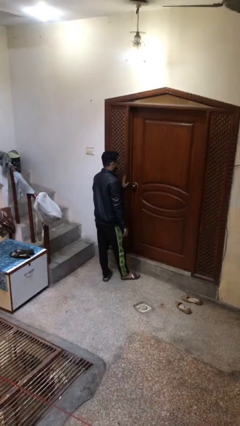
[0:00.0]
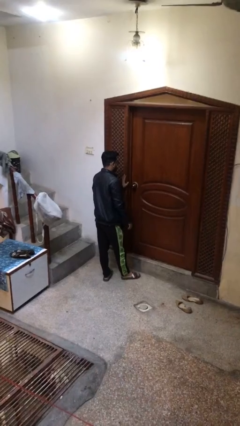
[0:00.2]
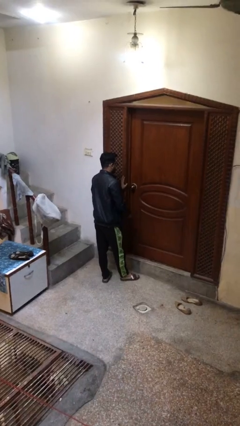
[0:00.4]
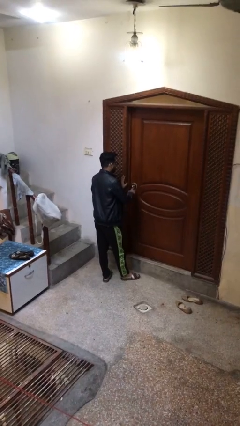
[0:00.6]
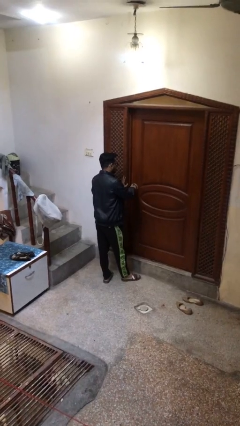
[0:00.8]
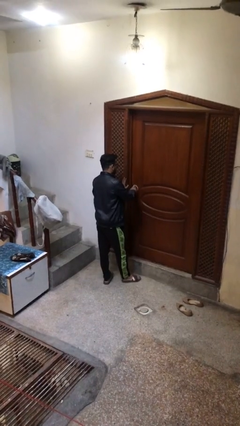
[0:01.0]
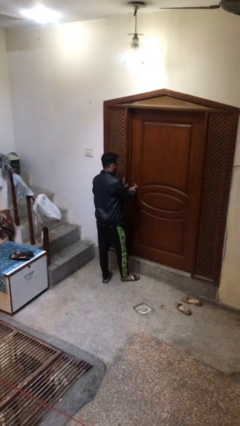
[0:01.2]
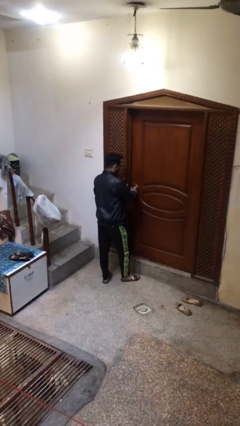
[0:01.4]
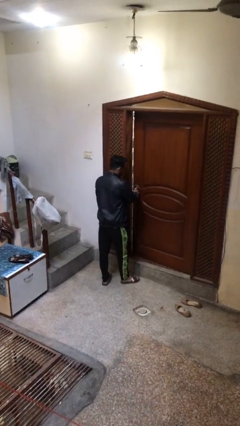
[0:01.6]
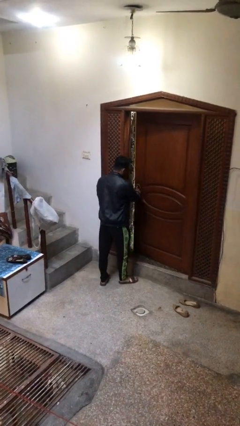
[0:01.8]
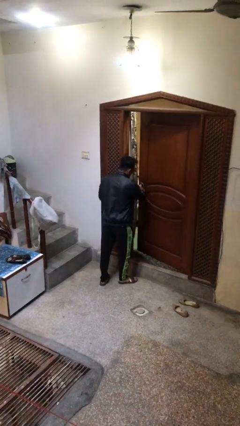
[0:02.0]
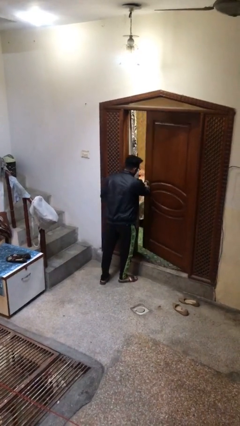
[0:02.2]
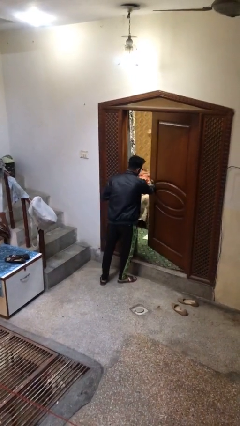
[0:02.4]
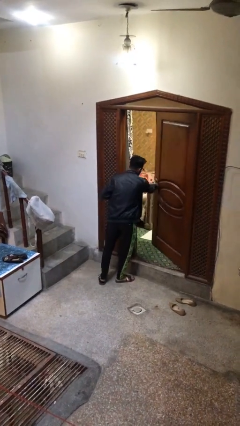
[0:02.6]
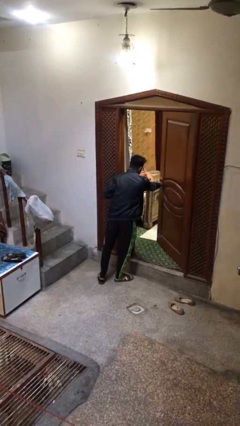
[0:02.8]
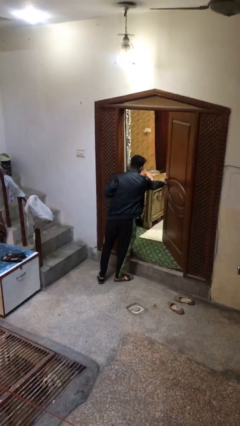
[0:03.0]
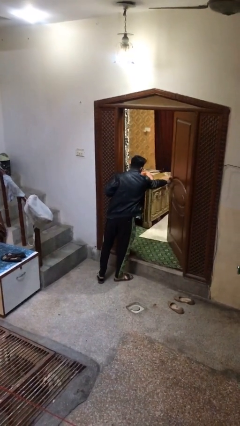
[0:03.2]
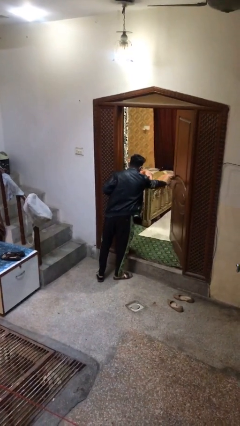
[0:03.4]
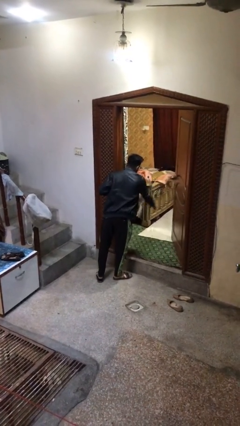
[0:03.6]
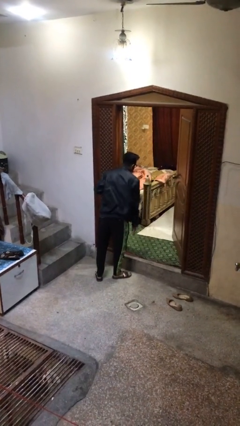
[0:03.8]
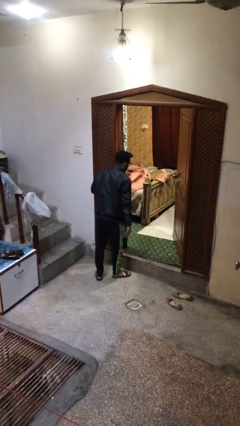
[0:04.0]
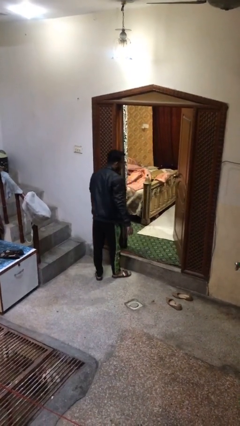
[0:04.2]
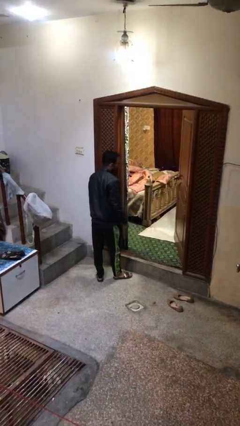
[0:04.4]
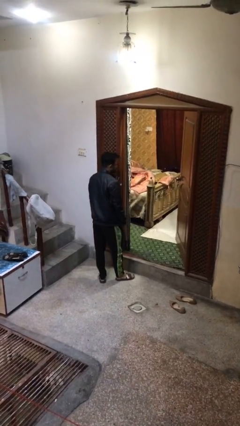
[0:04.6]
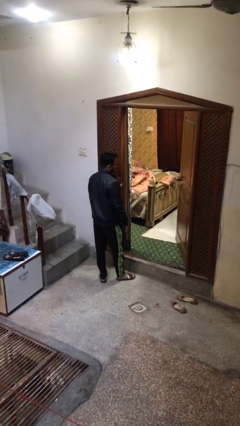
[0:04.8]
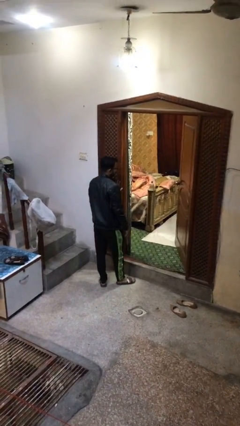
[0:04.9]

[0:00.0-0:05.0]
person opens facility door

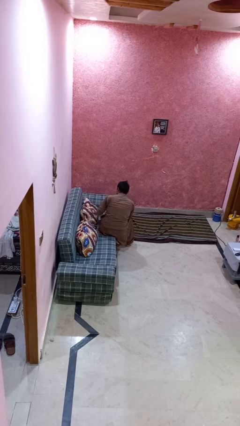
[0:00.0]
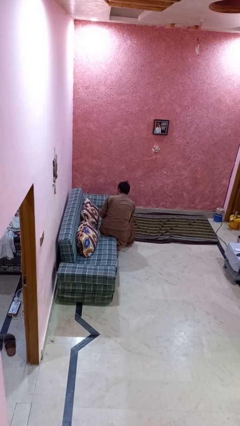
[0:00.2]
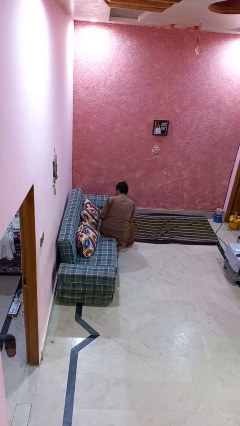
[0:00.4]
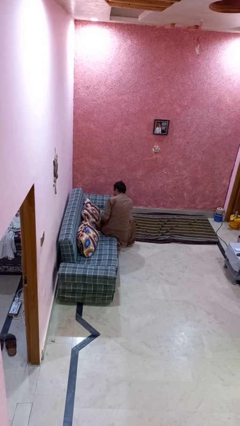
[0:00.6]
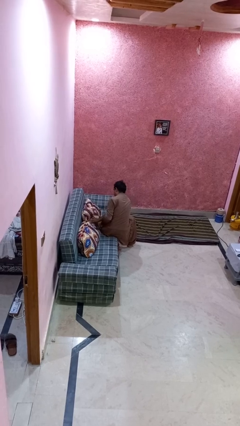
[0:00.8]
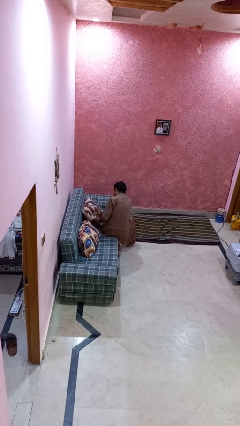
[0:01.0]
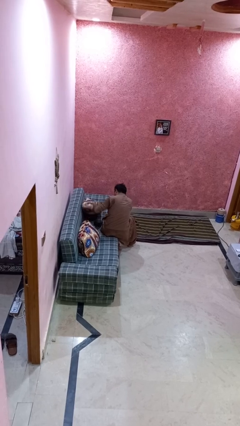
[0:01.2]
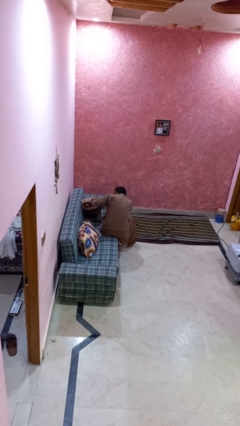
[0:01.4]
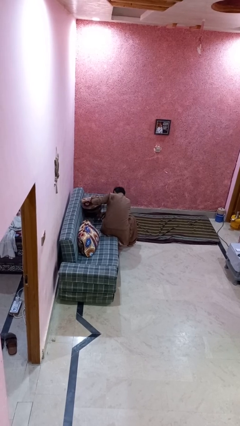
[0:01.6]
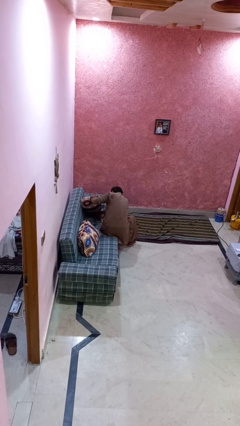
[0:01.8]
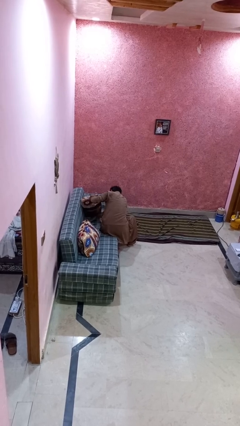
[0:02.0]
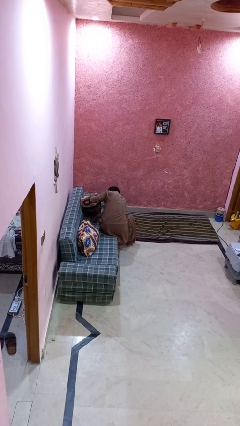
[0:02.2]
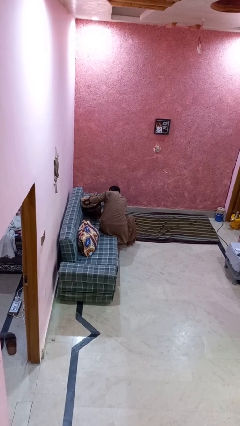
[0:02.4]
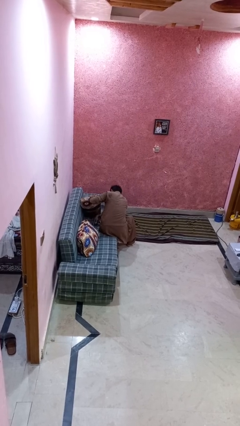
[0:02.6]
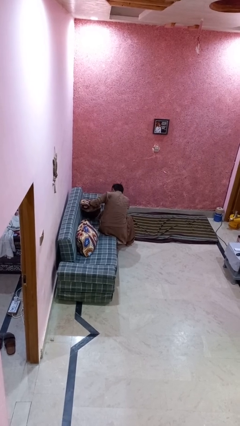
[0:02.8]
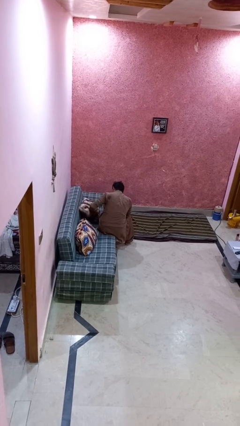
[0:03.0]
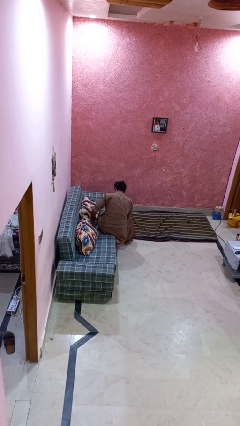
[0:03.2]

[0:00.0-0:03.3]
person searches in couch

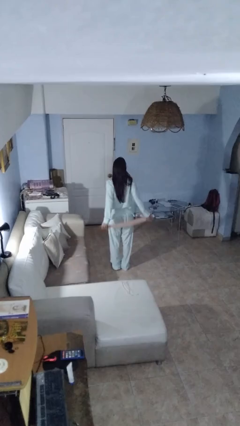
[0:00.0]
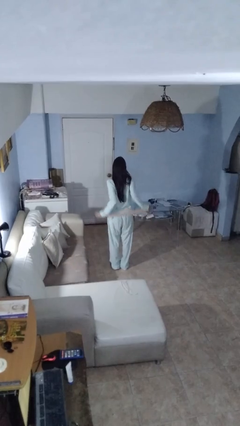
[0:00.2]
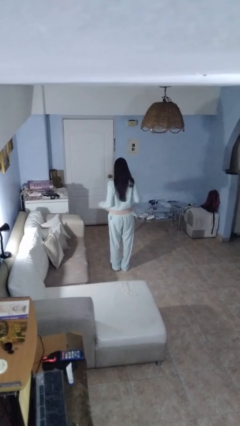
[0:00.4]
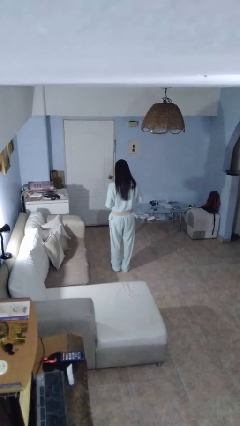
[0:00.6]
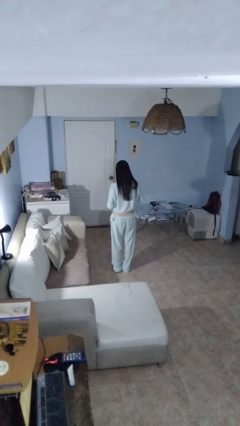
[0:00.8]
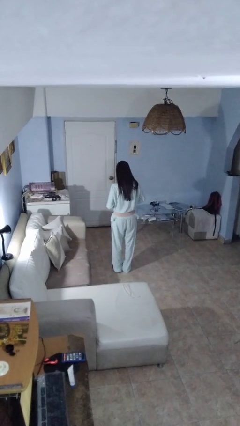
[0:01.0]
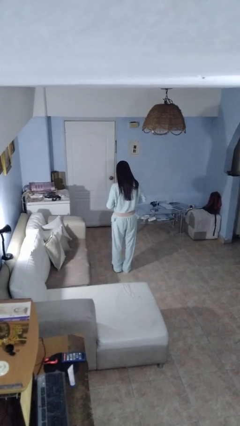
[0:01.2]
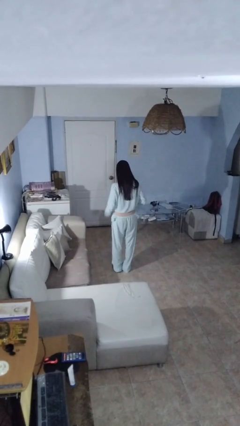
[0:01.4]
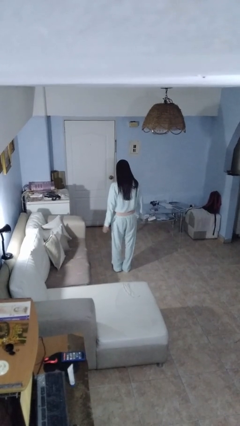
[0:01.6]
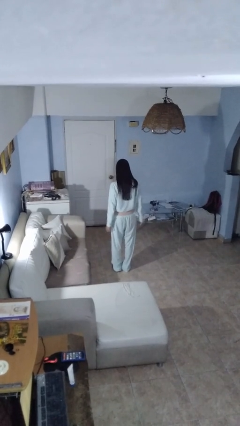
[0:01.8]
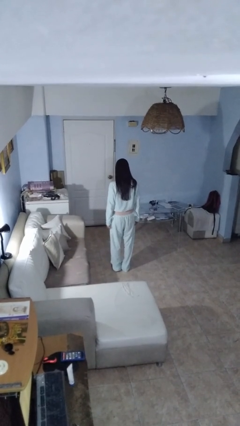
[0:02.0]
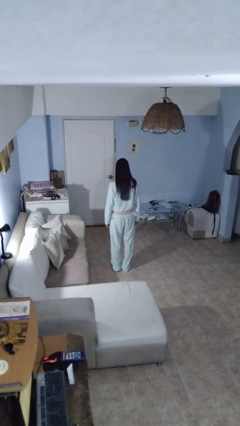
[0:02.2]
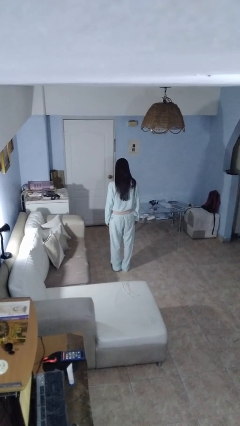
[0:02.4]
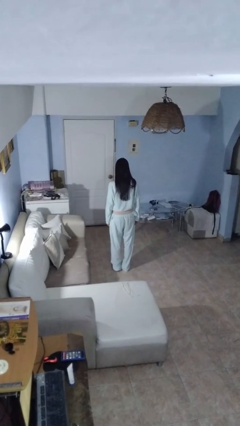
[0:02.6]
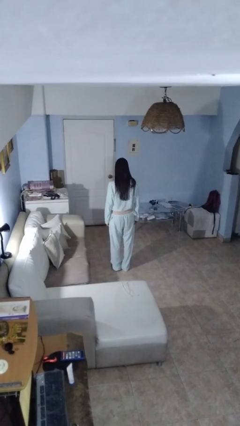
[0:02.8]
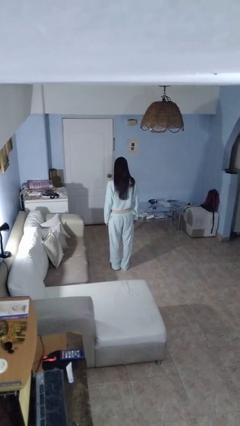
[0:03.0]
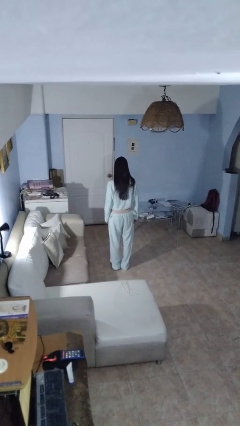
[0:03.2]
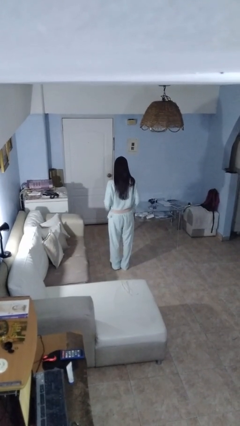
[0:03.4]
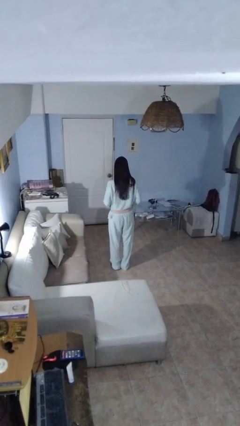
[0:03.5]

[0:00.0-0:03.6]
person puts on belt

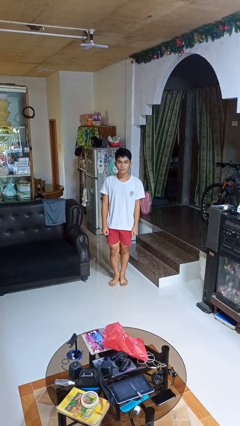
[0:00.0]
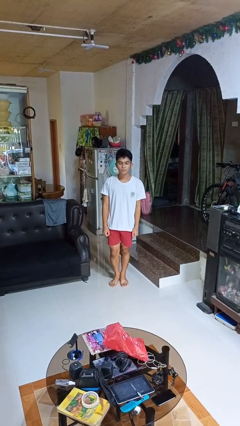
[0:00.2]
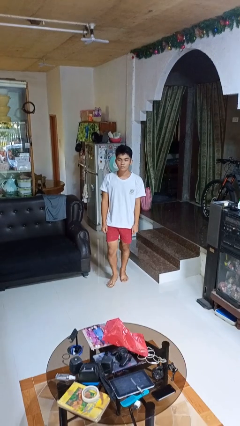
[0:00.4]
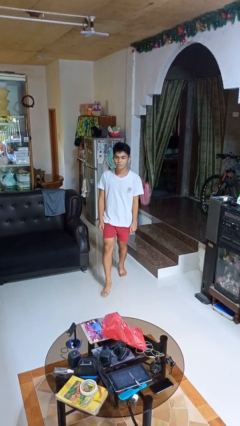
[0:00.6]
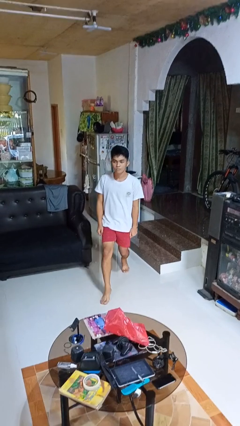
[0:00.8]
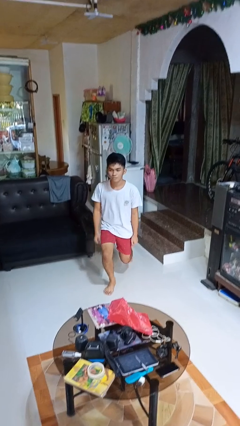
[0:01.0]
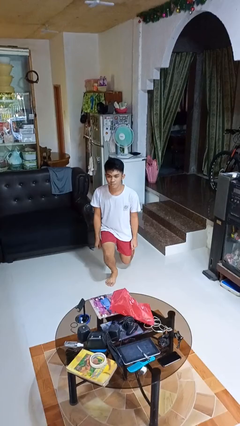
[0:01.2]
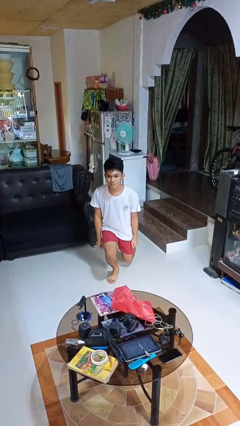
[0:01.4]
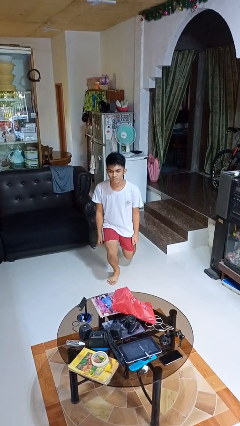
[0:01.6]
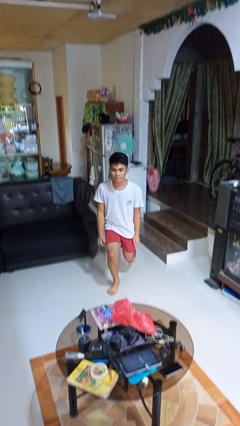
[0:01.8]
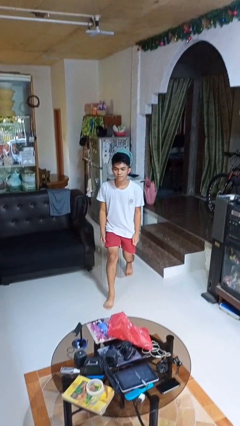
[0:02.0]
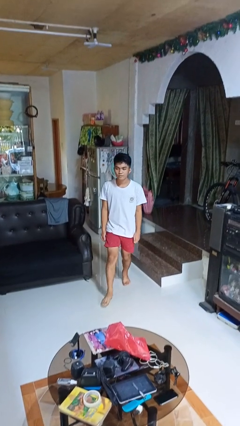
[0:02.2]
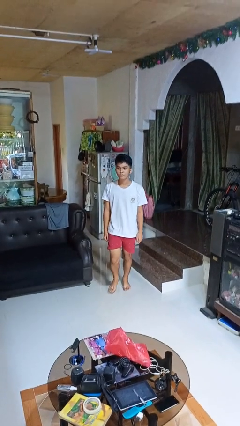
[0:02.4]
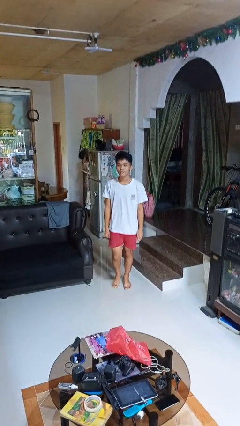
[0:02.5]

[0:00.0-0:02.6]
person exercises with lunges

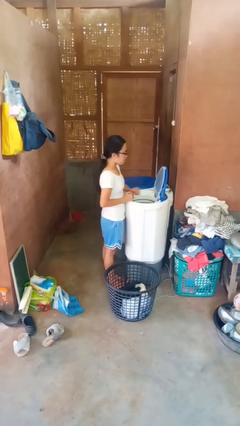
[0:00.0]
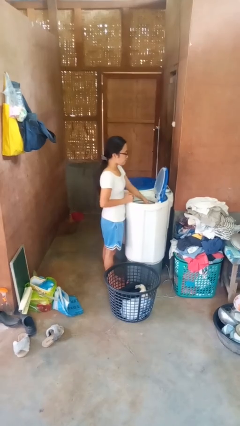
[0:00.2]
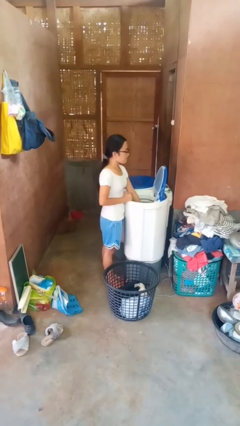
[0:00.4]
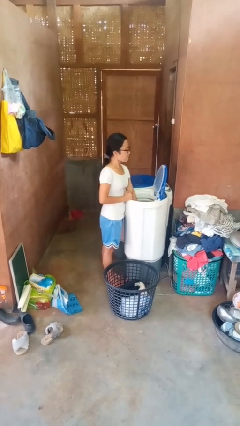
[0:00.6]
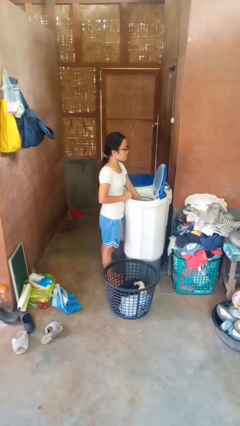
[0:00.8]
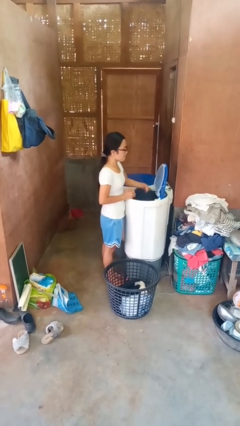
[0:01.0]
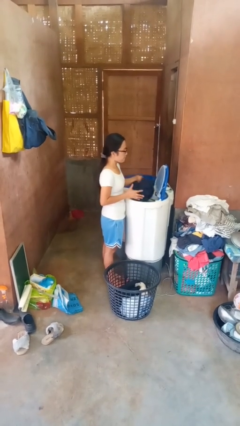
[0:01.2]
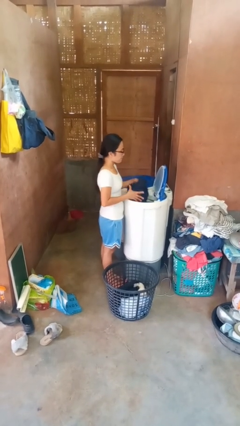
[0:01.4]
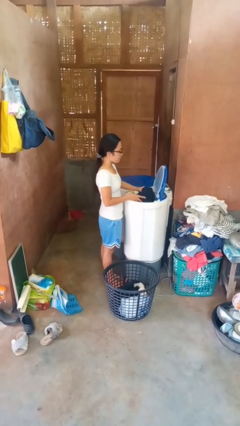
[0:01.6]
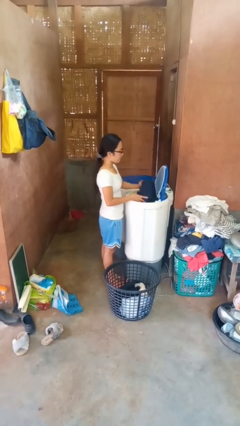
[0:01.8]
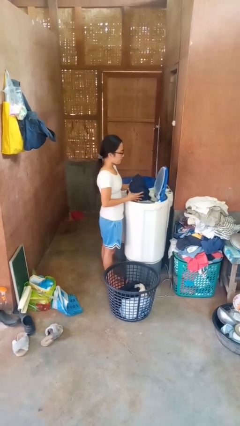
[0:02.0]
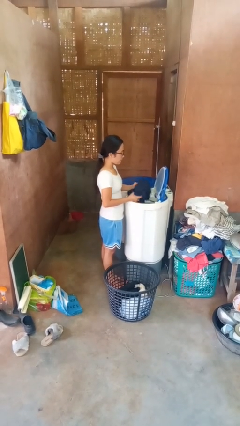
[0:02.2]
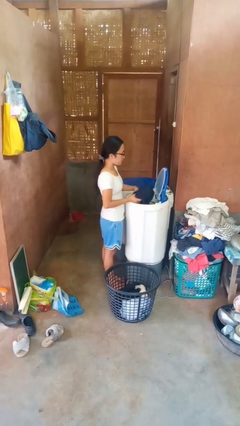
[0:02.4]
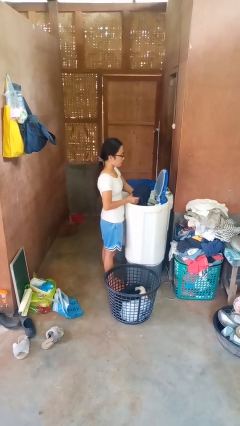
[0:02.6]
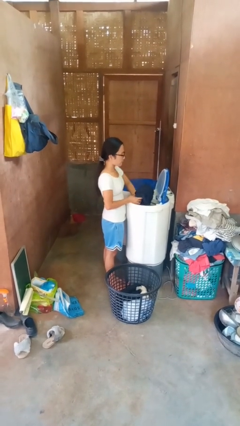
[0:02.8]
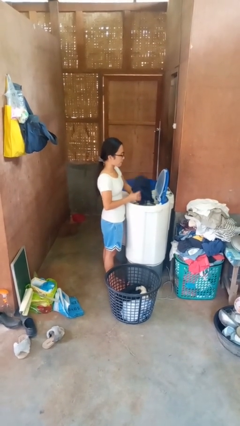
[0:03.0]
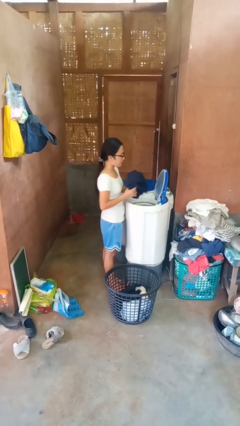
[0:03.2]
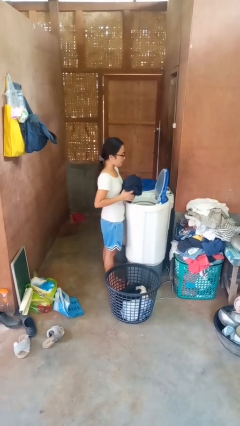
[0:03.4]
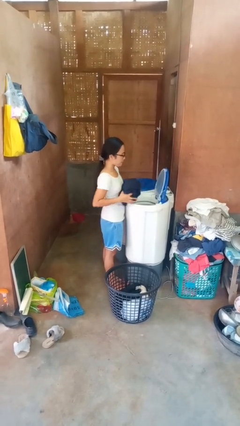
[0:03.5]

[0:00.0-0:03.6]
person unloads dryer
